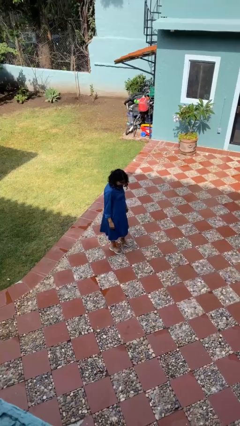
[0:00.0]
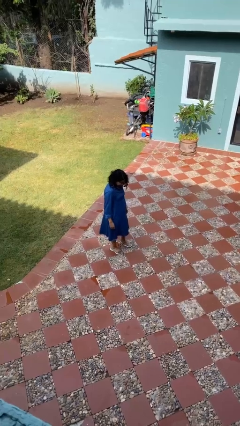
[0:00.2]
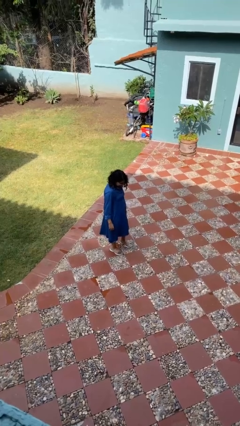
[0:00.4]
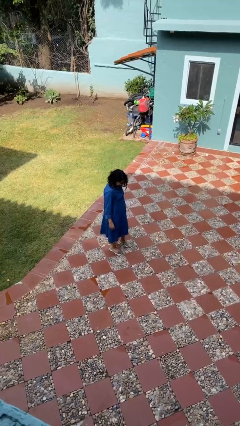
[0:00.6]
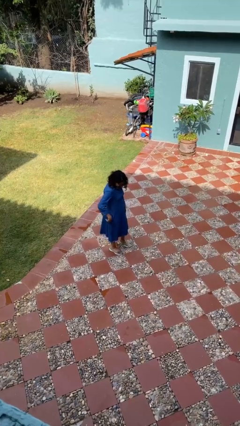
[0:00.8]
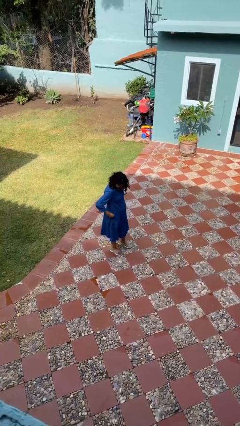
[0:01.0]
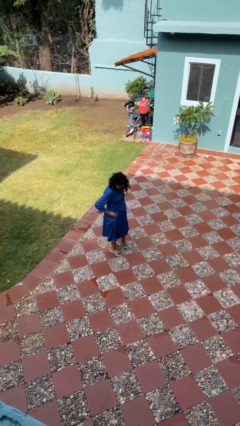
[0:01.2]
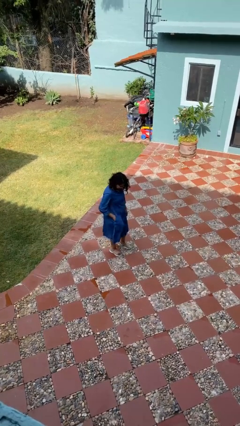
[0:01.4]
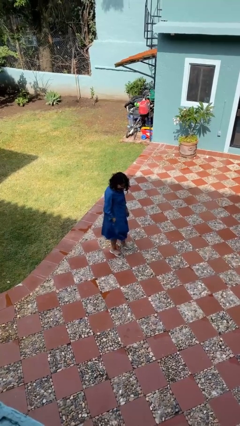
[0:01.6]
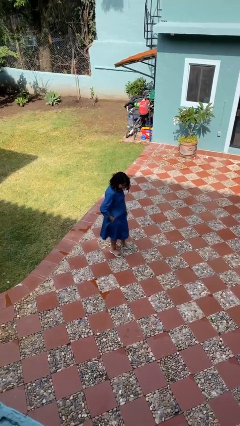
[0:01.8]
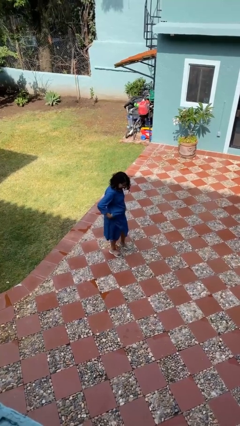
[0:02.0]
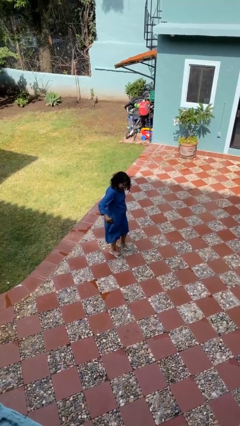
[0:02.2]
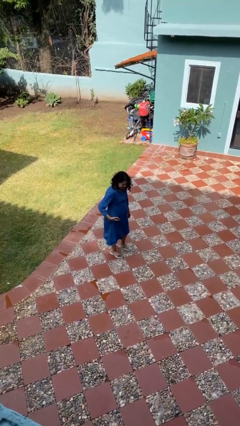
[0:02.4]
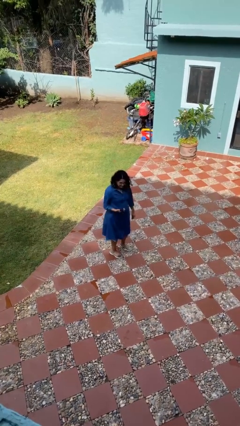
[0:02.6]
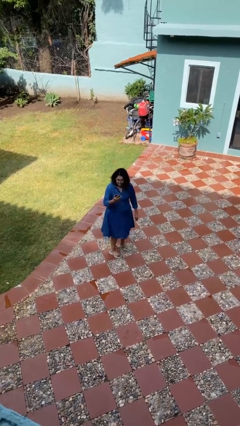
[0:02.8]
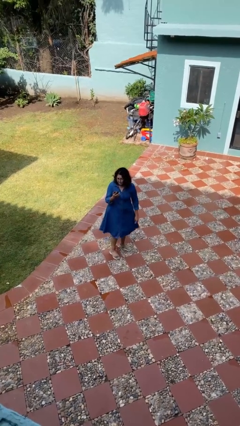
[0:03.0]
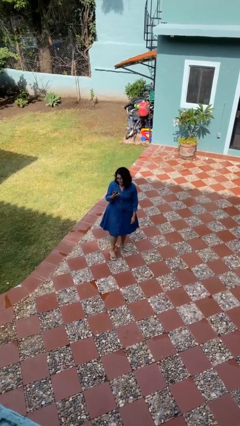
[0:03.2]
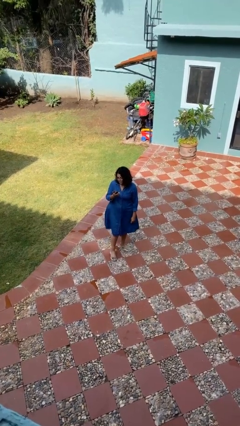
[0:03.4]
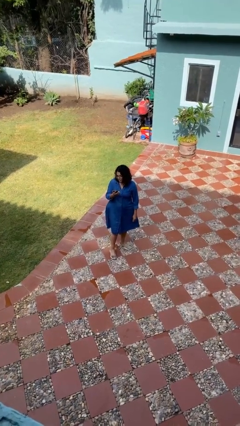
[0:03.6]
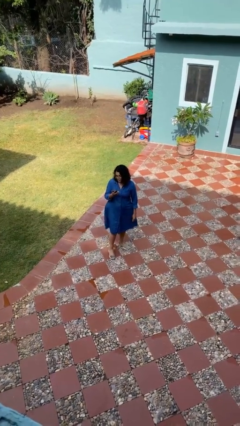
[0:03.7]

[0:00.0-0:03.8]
person takes phone from pocket

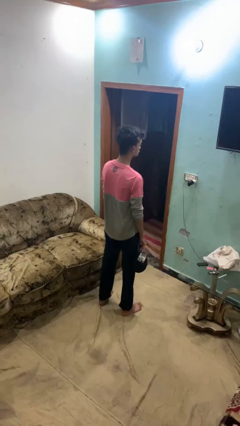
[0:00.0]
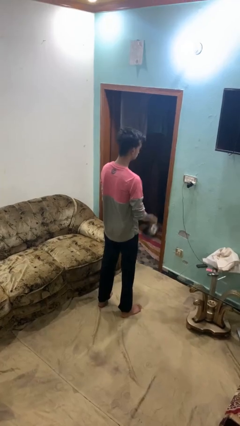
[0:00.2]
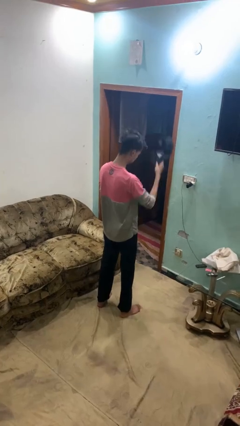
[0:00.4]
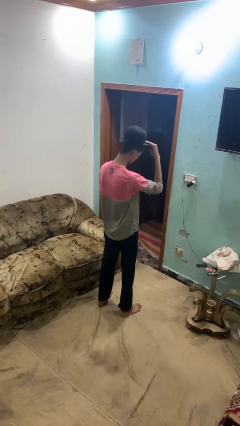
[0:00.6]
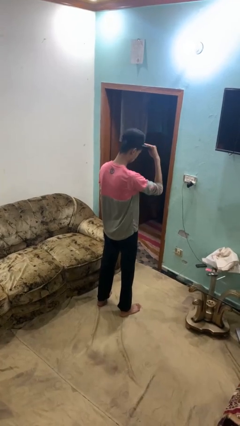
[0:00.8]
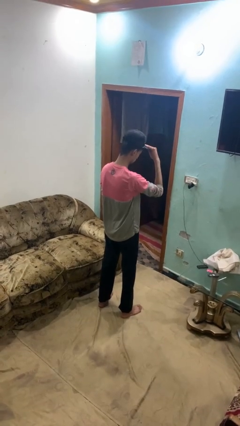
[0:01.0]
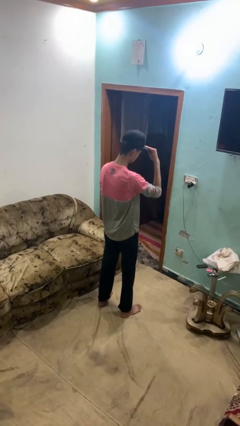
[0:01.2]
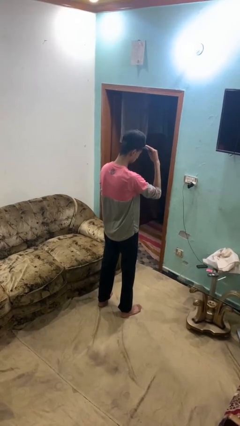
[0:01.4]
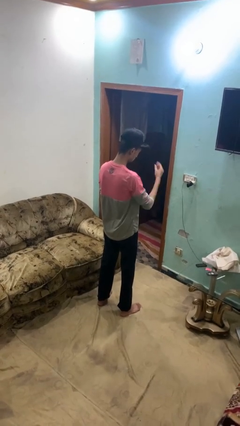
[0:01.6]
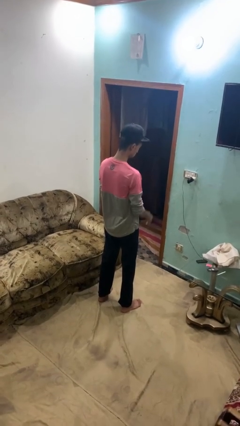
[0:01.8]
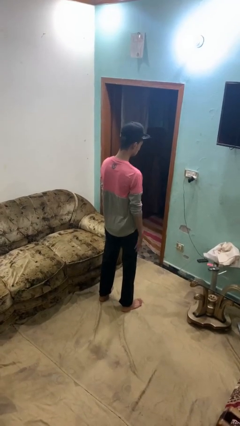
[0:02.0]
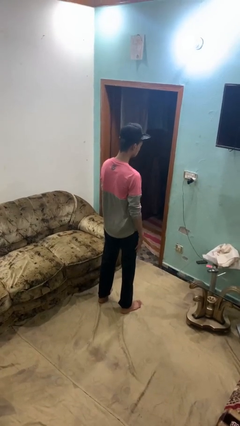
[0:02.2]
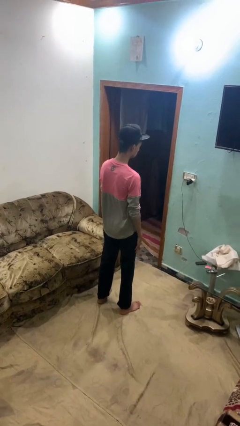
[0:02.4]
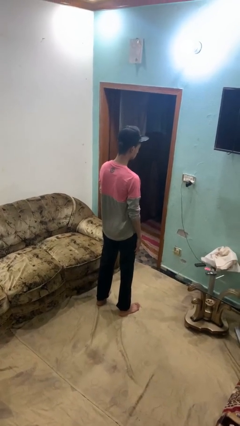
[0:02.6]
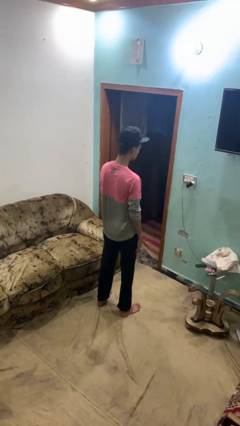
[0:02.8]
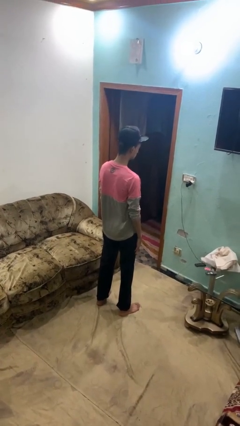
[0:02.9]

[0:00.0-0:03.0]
person puts on hat

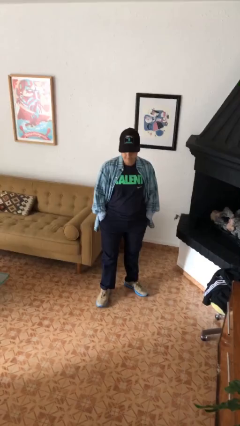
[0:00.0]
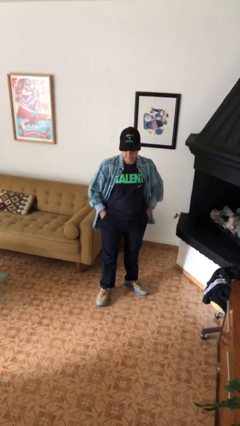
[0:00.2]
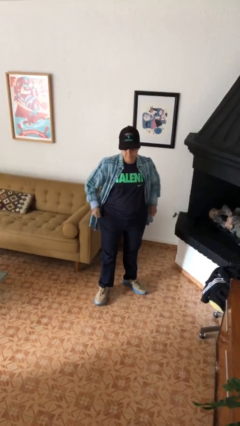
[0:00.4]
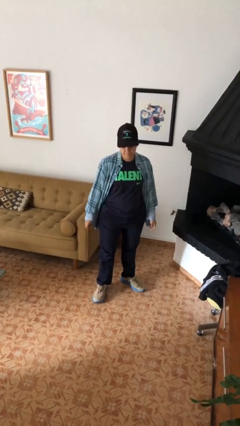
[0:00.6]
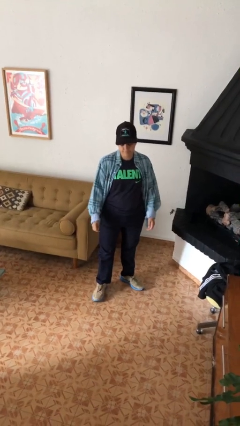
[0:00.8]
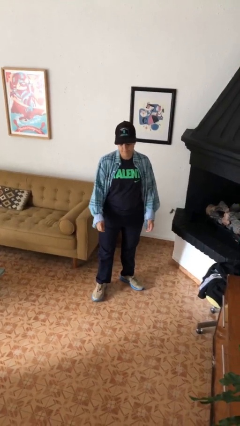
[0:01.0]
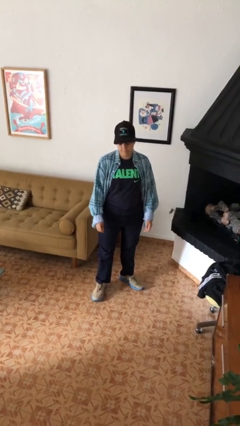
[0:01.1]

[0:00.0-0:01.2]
person puts hands in back pockets

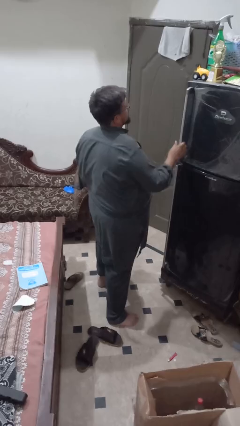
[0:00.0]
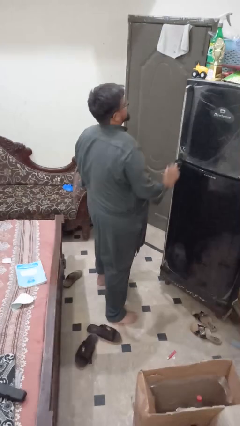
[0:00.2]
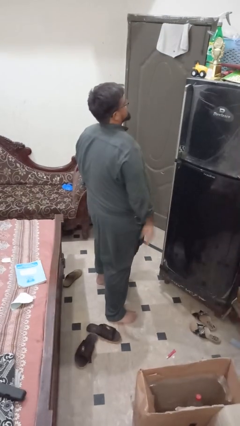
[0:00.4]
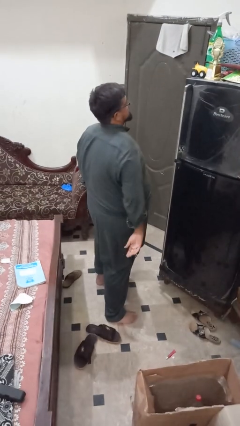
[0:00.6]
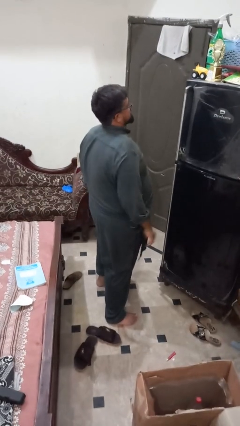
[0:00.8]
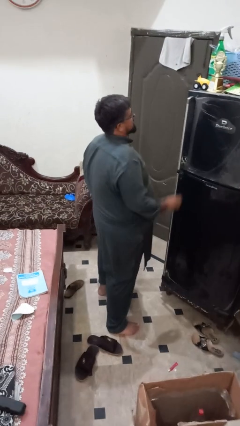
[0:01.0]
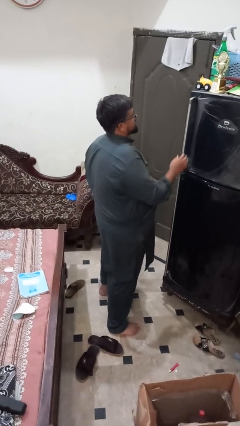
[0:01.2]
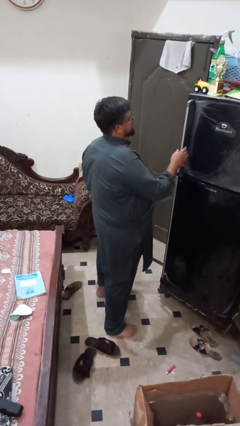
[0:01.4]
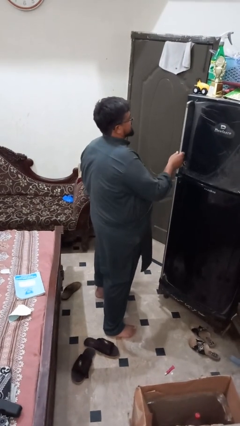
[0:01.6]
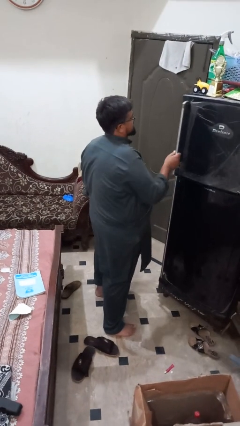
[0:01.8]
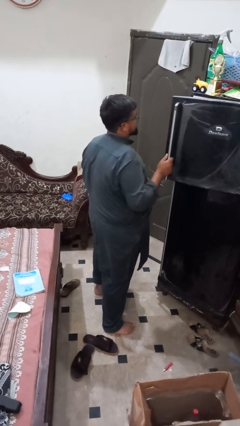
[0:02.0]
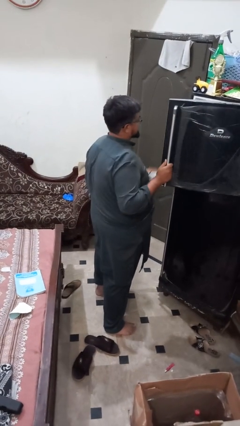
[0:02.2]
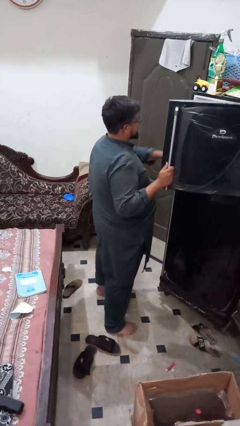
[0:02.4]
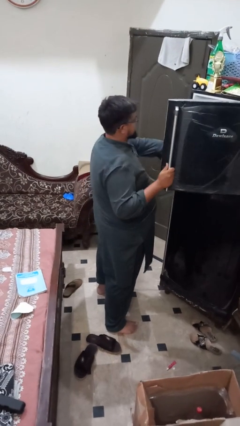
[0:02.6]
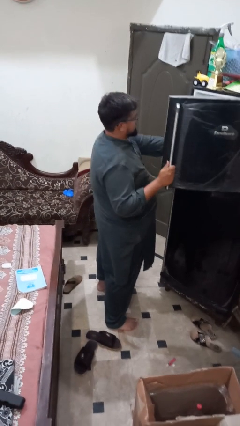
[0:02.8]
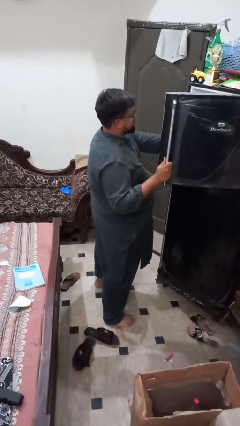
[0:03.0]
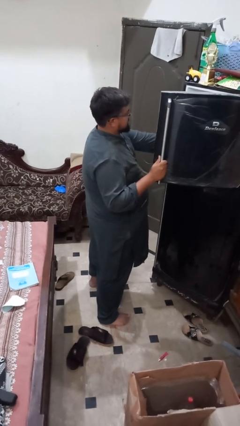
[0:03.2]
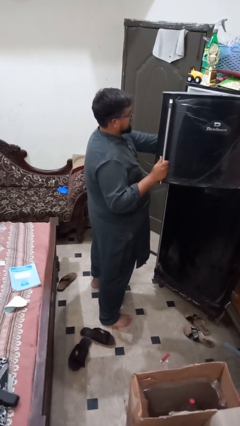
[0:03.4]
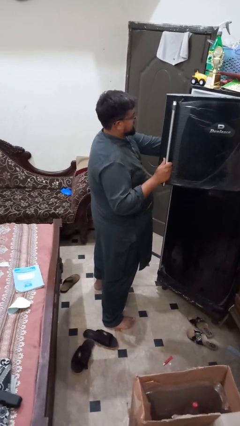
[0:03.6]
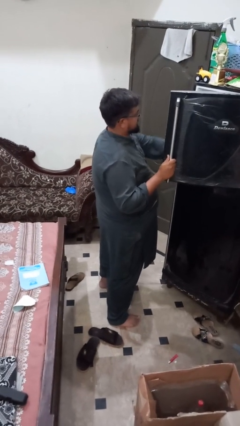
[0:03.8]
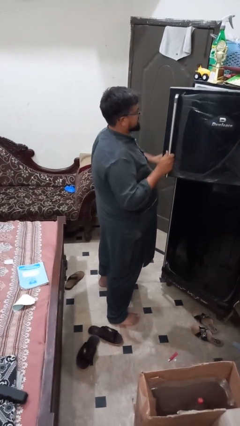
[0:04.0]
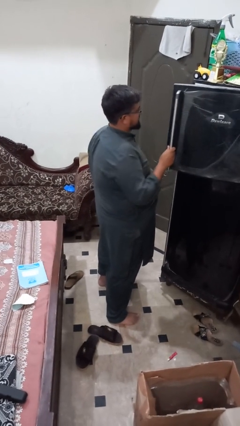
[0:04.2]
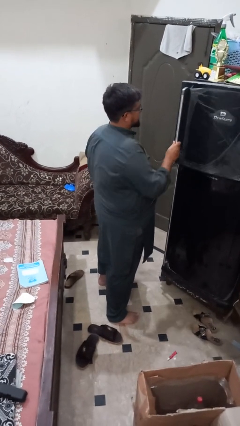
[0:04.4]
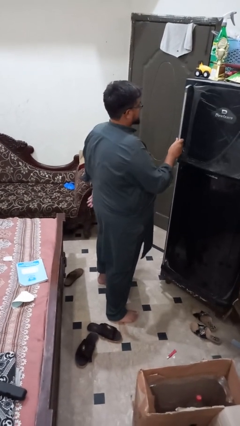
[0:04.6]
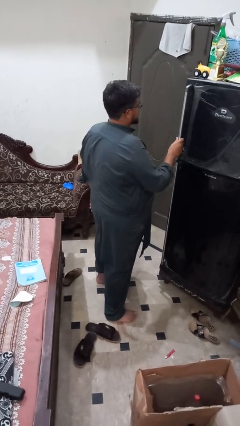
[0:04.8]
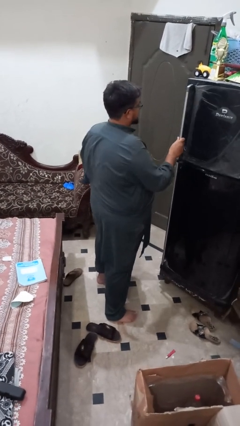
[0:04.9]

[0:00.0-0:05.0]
person puts object into refrigerator

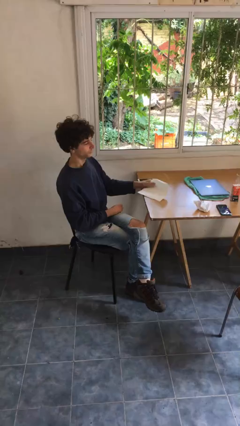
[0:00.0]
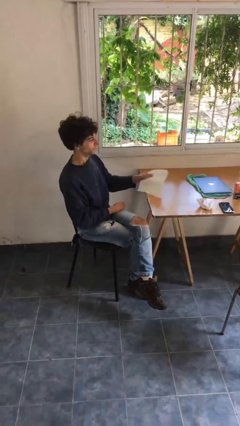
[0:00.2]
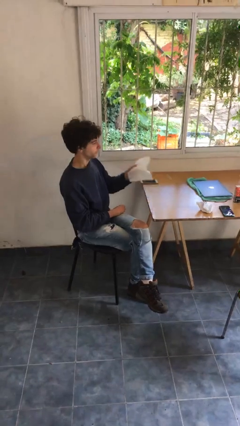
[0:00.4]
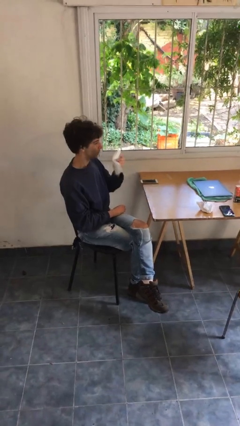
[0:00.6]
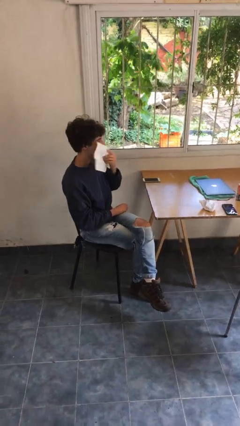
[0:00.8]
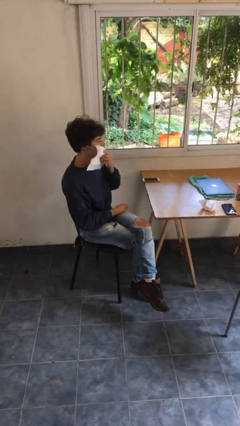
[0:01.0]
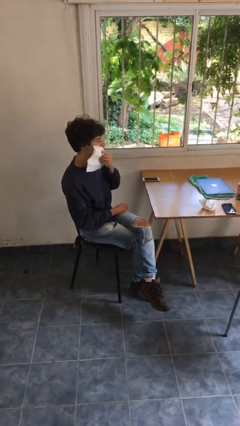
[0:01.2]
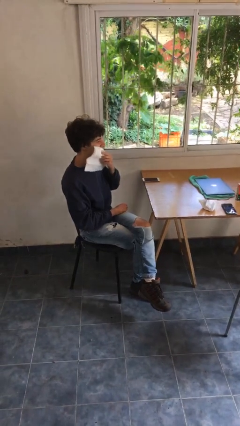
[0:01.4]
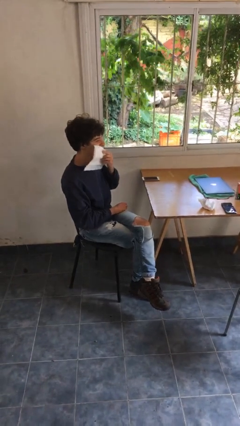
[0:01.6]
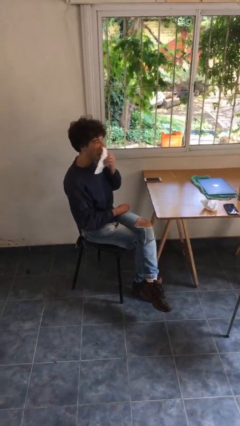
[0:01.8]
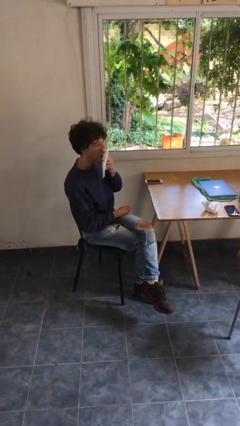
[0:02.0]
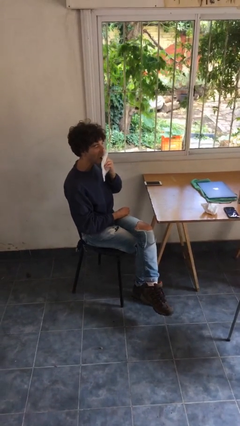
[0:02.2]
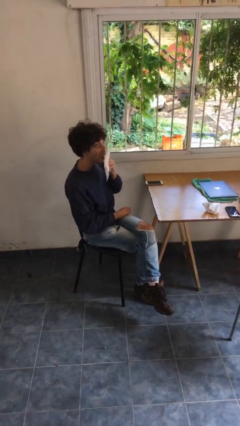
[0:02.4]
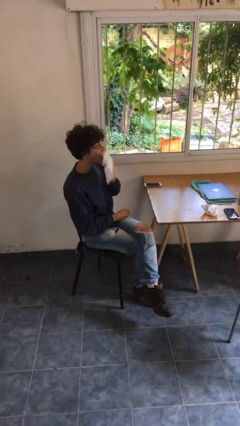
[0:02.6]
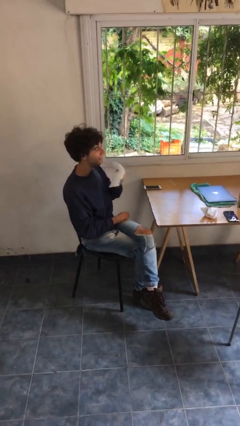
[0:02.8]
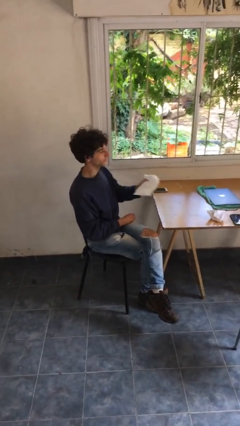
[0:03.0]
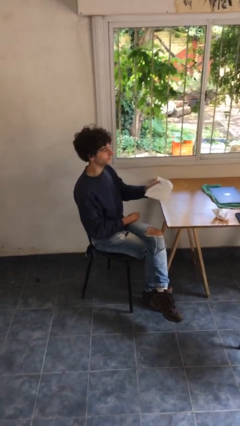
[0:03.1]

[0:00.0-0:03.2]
person wipes mouth with napkin

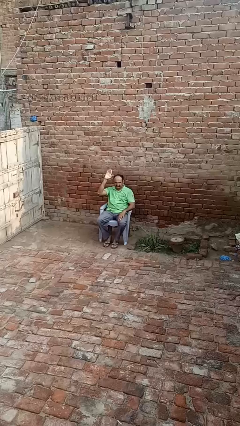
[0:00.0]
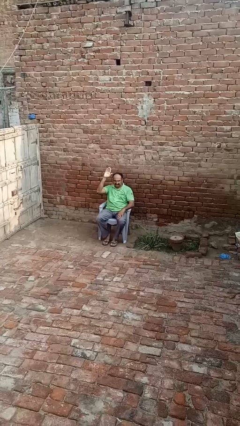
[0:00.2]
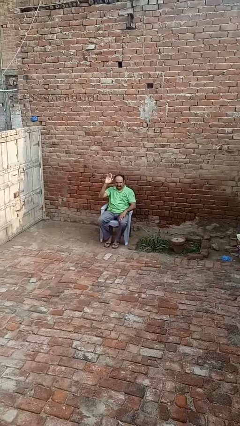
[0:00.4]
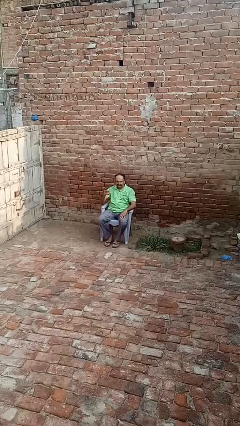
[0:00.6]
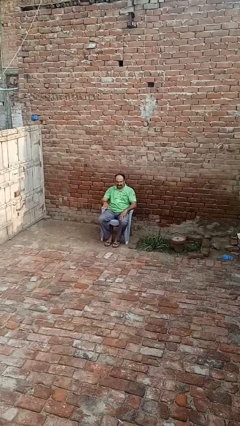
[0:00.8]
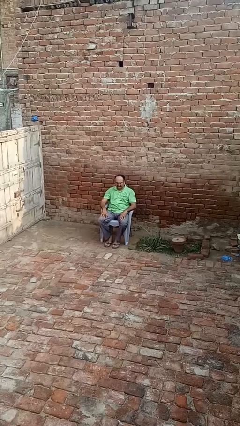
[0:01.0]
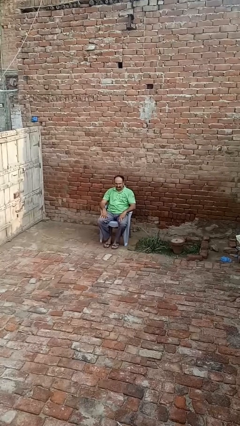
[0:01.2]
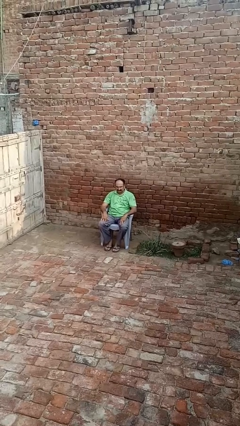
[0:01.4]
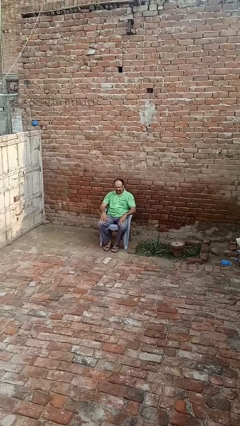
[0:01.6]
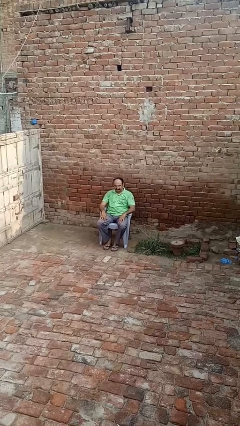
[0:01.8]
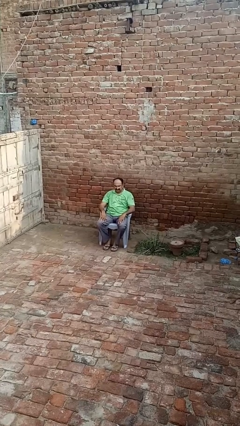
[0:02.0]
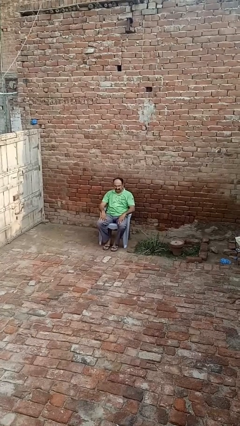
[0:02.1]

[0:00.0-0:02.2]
person gestures lower hand
